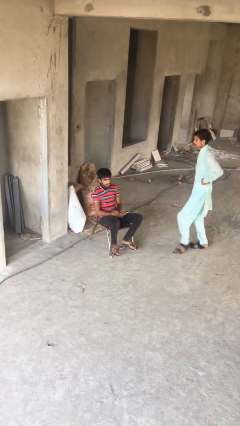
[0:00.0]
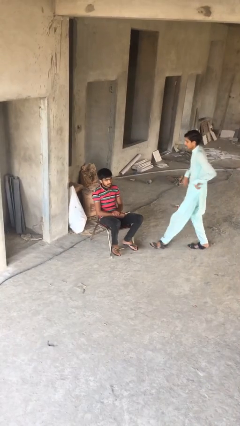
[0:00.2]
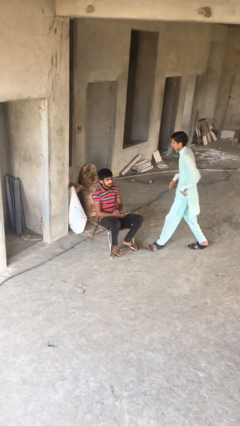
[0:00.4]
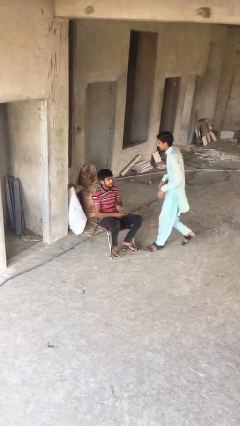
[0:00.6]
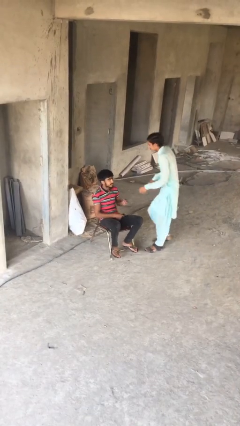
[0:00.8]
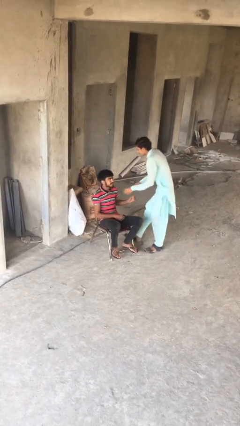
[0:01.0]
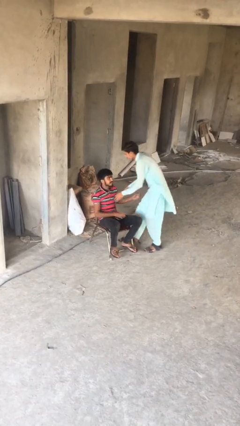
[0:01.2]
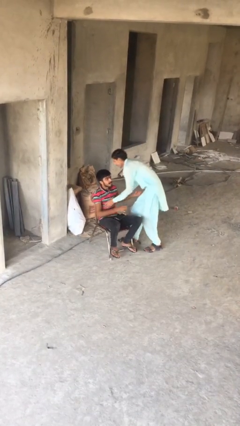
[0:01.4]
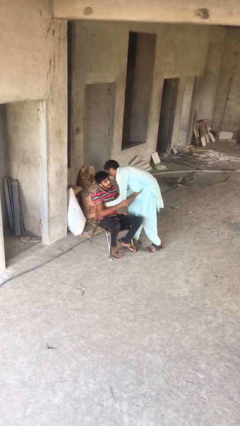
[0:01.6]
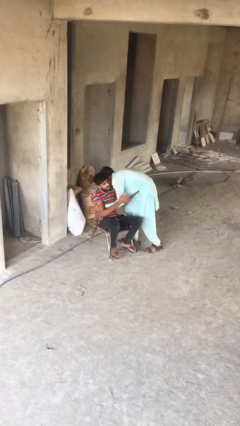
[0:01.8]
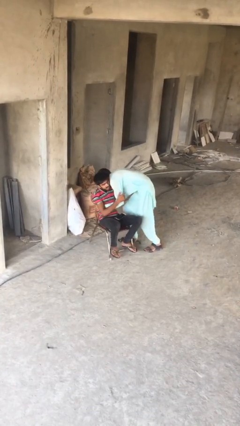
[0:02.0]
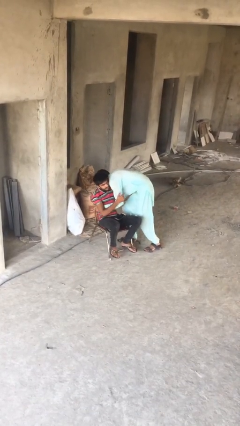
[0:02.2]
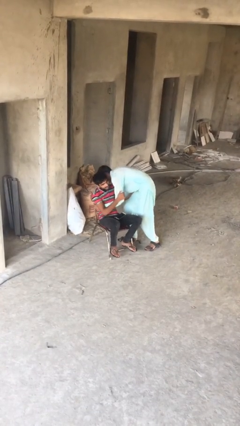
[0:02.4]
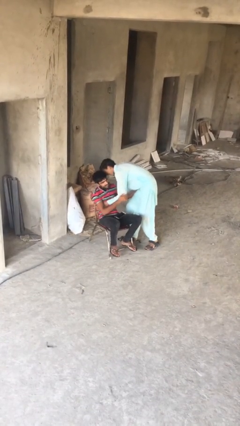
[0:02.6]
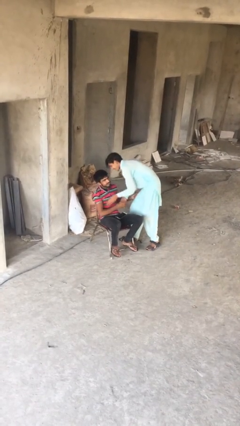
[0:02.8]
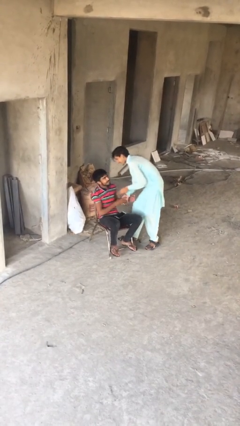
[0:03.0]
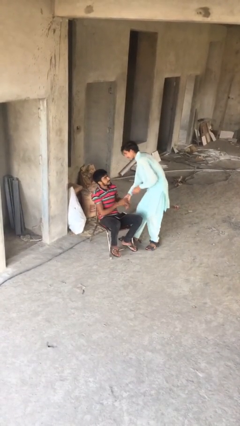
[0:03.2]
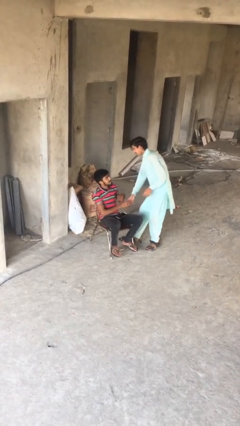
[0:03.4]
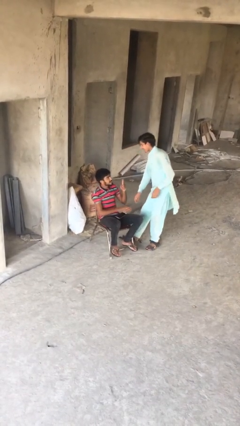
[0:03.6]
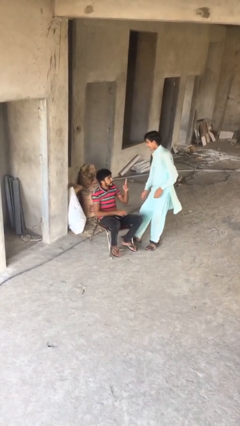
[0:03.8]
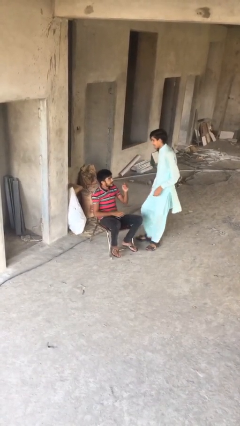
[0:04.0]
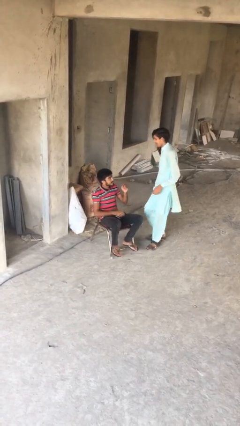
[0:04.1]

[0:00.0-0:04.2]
person embraces person

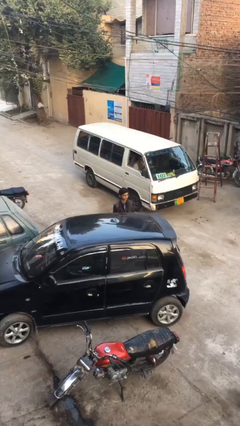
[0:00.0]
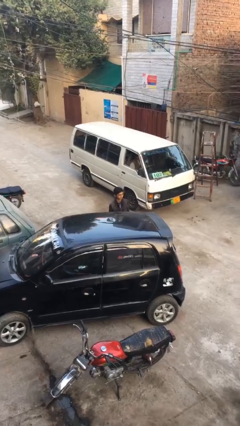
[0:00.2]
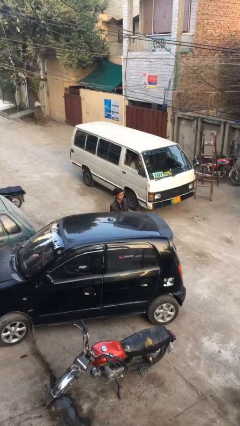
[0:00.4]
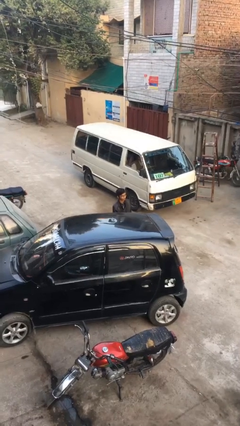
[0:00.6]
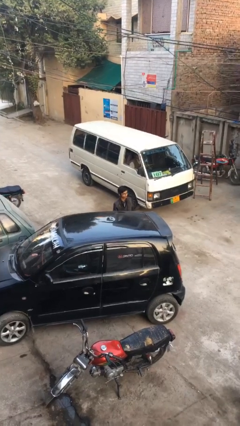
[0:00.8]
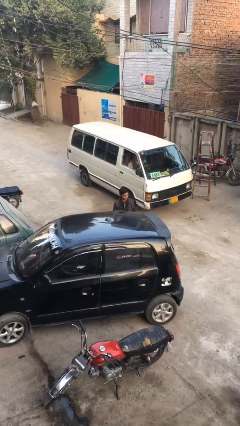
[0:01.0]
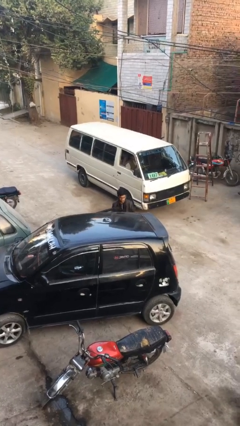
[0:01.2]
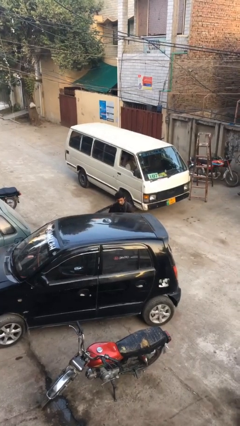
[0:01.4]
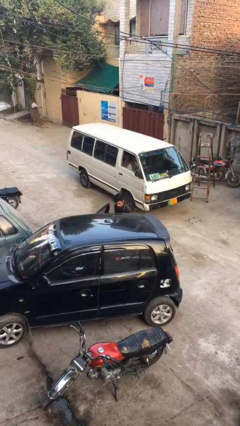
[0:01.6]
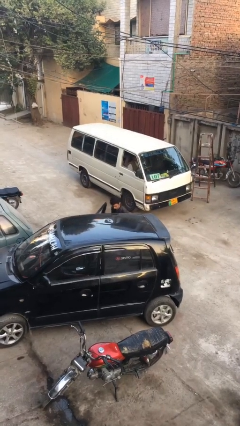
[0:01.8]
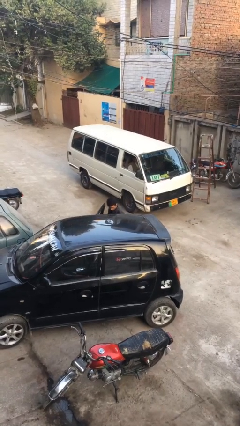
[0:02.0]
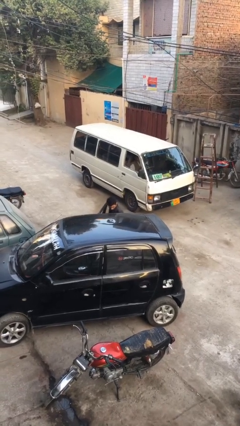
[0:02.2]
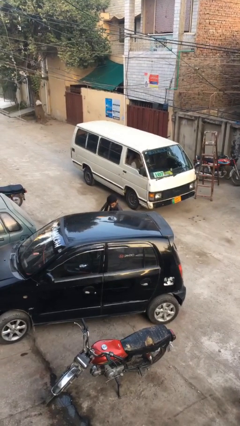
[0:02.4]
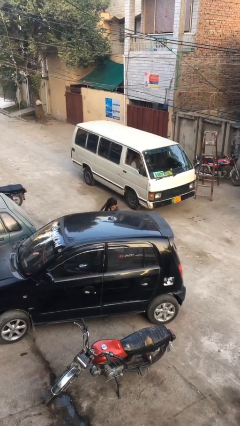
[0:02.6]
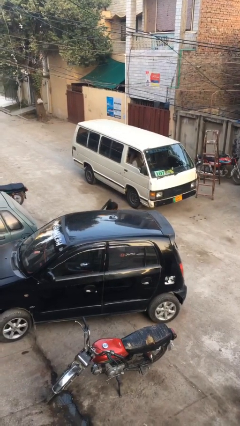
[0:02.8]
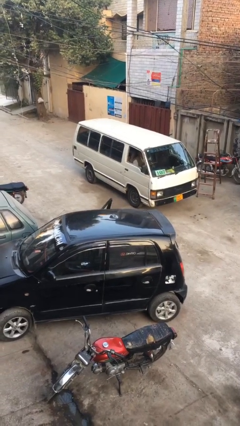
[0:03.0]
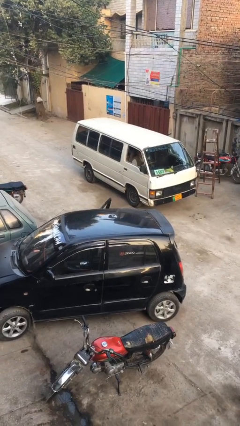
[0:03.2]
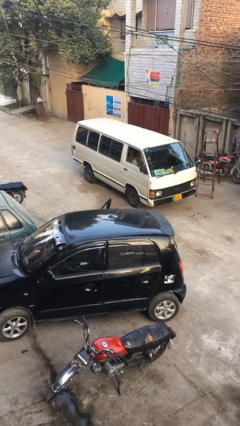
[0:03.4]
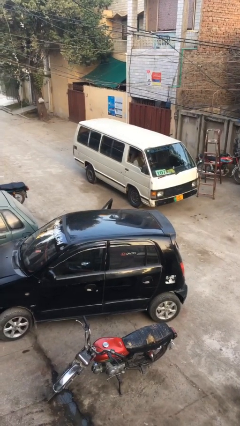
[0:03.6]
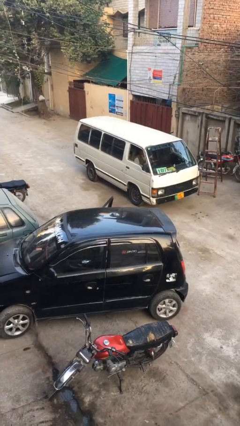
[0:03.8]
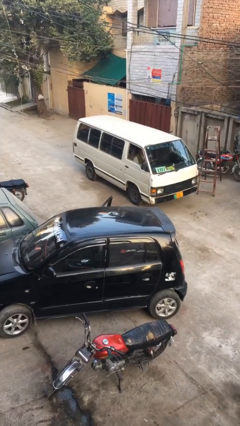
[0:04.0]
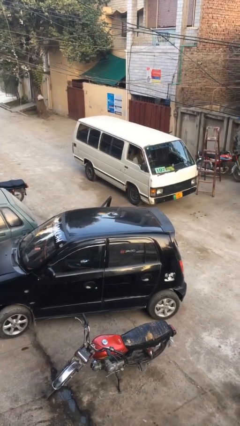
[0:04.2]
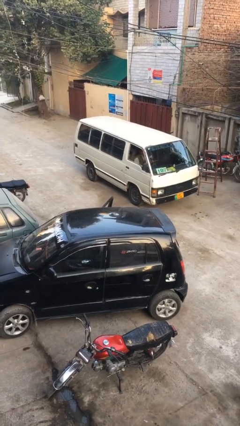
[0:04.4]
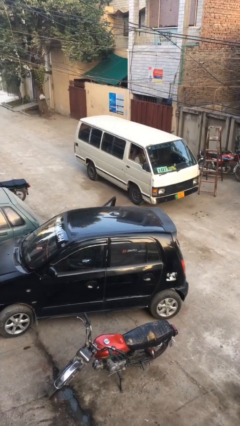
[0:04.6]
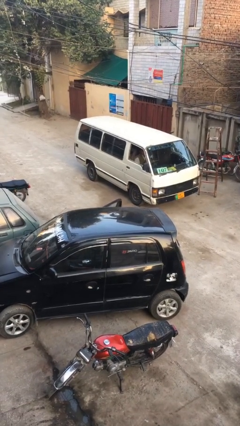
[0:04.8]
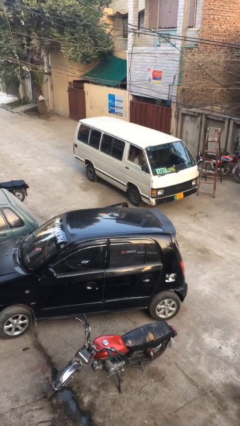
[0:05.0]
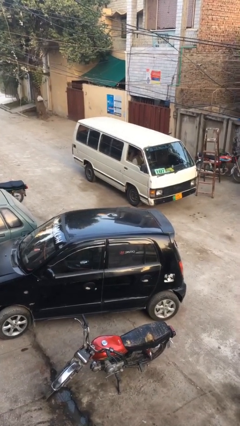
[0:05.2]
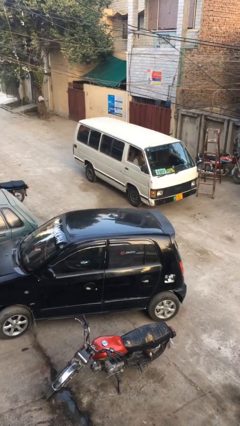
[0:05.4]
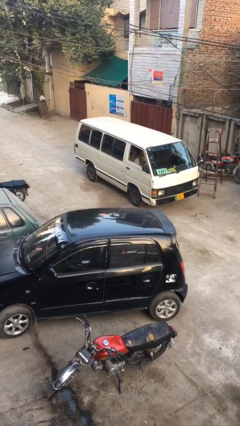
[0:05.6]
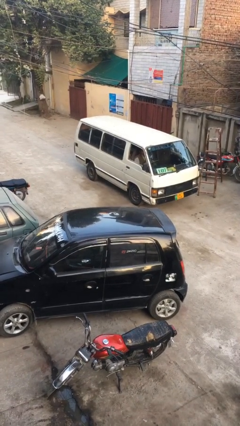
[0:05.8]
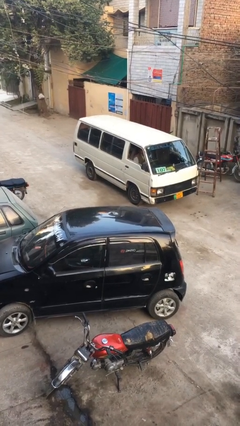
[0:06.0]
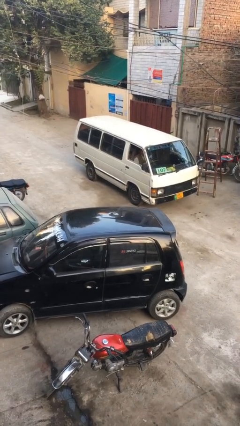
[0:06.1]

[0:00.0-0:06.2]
person enters car

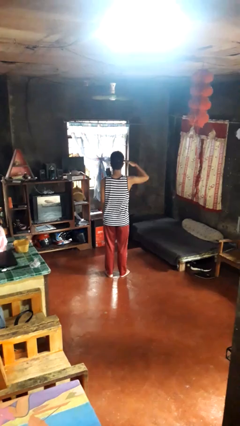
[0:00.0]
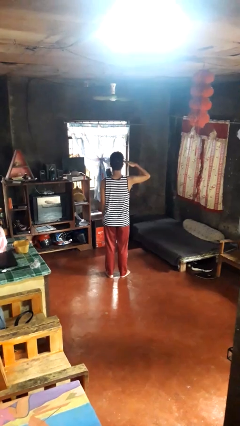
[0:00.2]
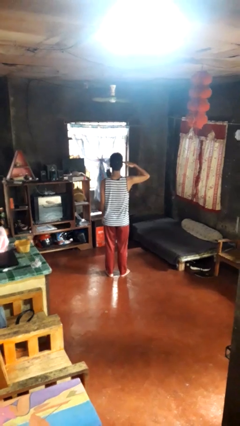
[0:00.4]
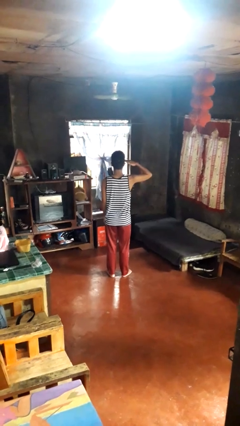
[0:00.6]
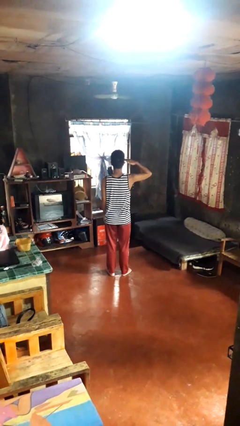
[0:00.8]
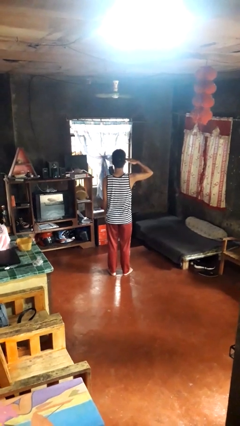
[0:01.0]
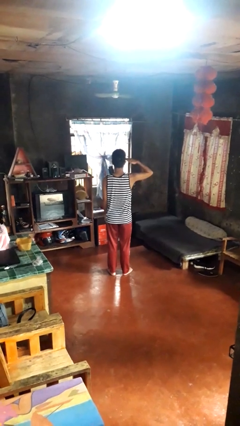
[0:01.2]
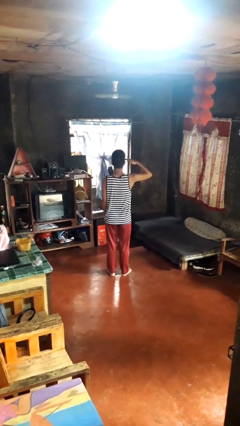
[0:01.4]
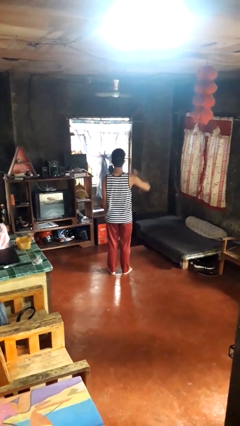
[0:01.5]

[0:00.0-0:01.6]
person salutes

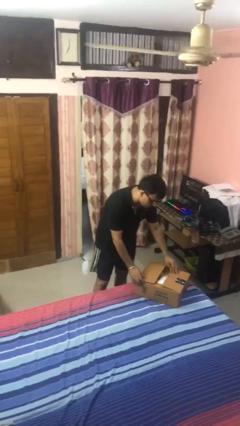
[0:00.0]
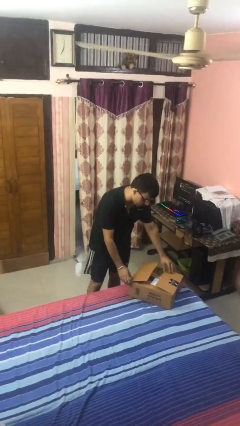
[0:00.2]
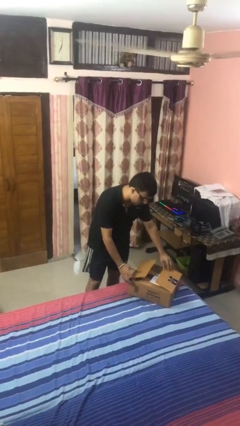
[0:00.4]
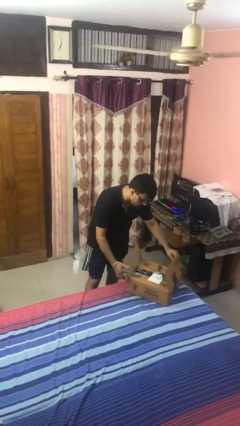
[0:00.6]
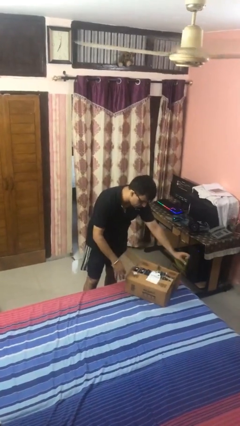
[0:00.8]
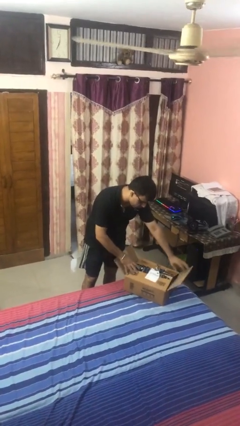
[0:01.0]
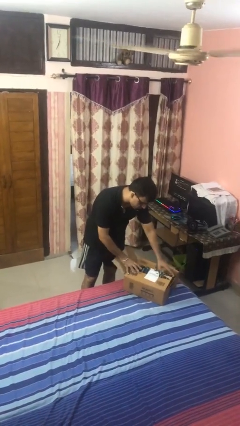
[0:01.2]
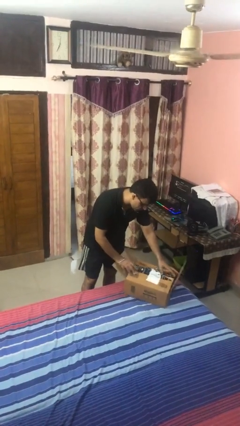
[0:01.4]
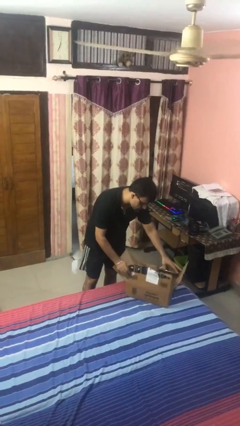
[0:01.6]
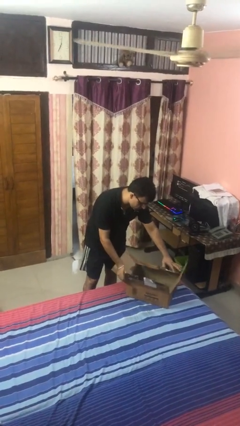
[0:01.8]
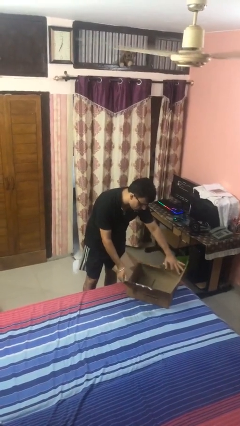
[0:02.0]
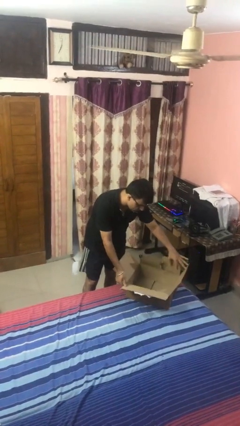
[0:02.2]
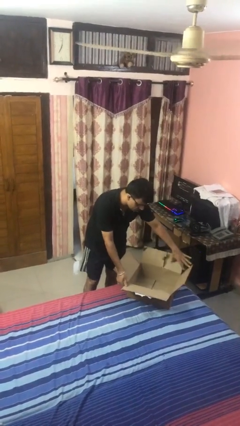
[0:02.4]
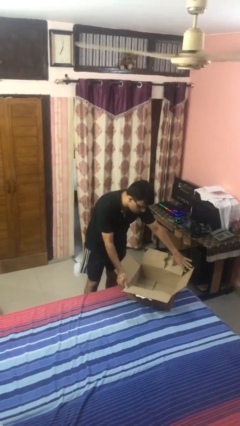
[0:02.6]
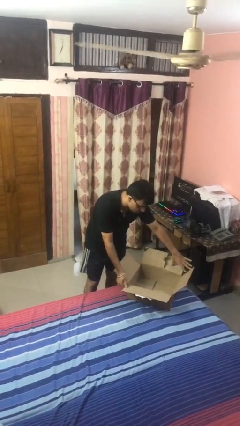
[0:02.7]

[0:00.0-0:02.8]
person opens box

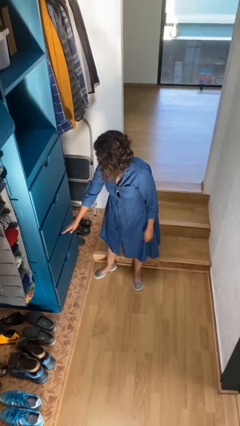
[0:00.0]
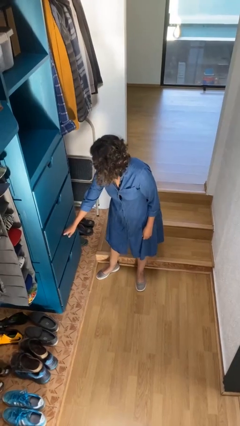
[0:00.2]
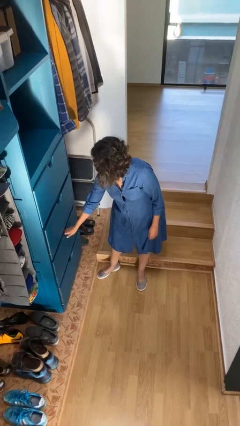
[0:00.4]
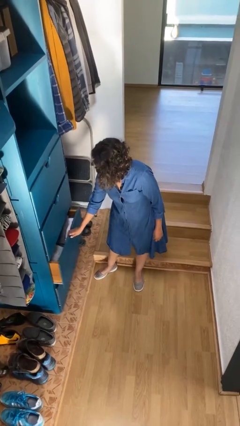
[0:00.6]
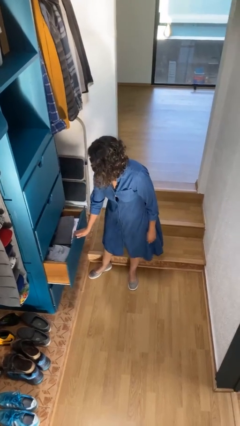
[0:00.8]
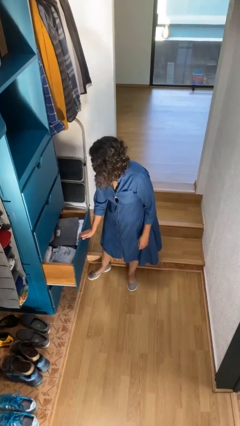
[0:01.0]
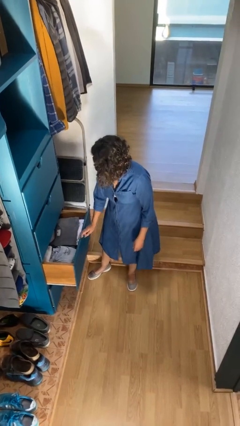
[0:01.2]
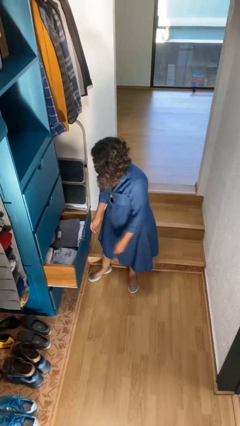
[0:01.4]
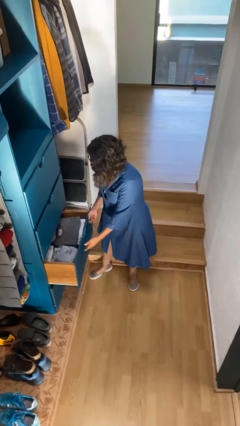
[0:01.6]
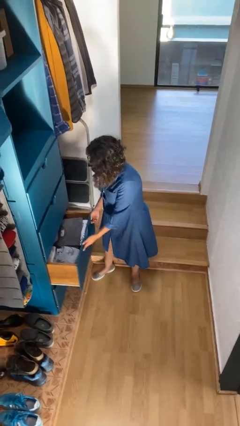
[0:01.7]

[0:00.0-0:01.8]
person opens dresser drawer

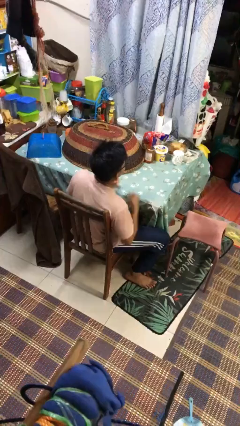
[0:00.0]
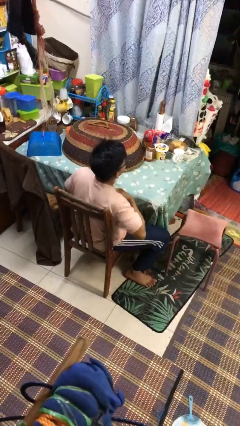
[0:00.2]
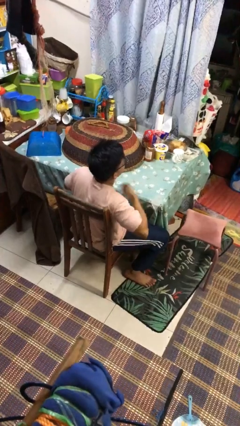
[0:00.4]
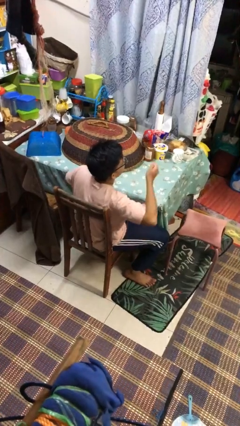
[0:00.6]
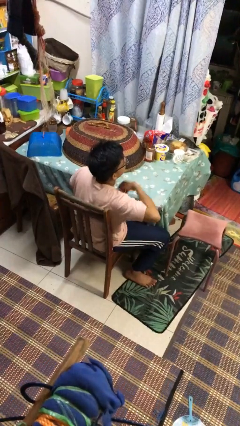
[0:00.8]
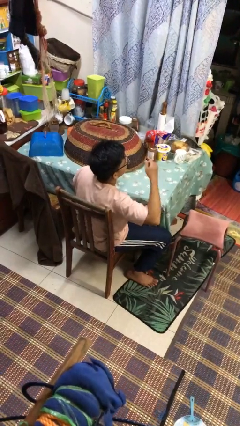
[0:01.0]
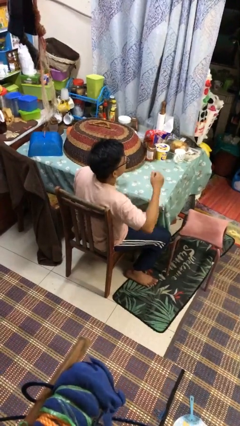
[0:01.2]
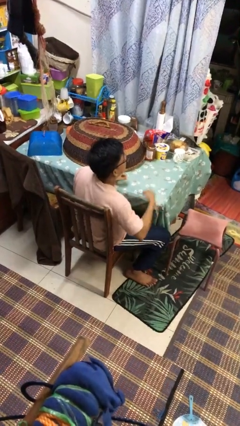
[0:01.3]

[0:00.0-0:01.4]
person drums on chest
